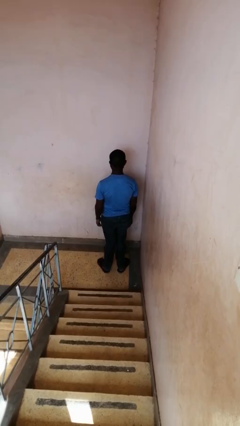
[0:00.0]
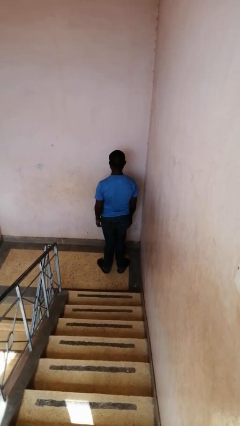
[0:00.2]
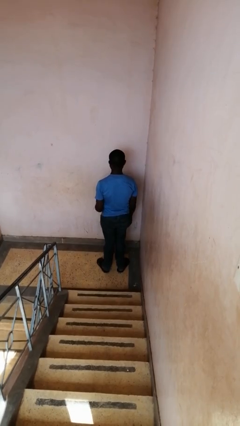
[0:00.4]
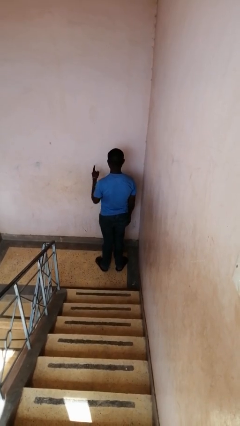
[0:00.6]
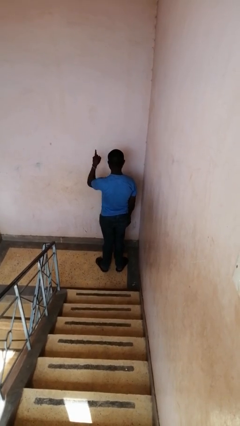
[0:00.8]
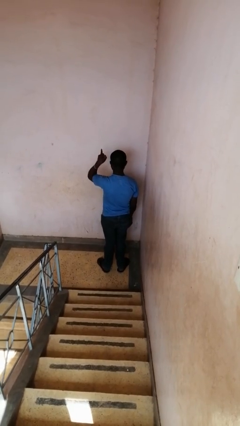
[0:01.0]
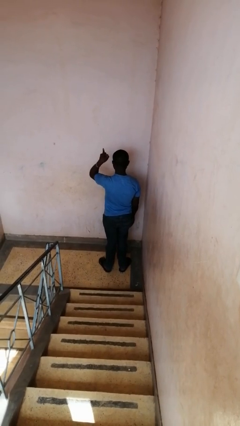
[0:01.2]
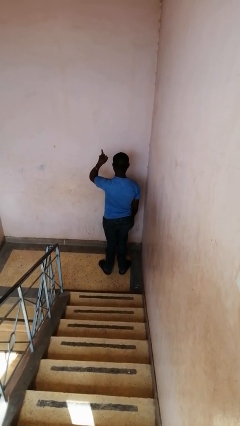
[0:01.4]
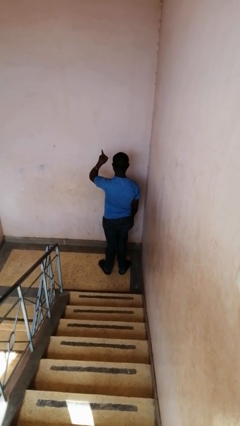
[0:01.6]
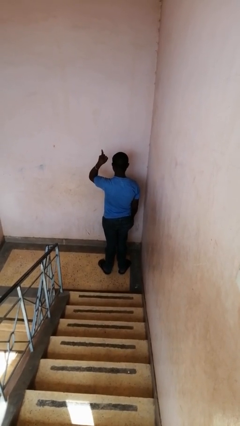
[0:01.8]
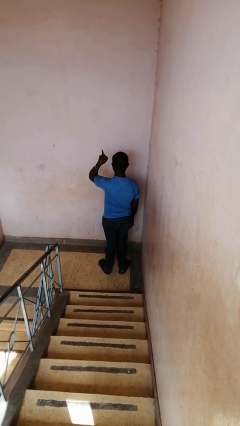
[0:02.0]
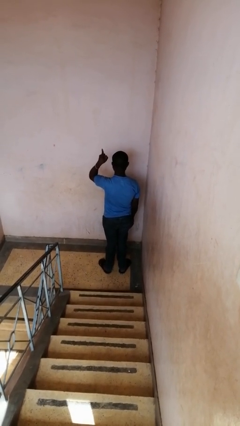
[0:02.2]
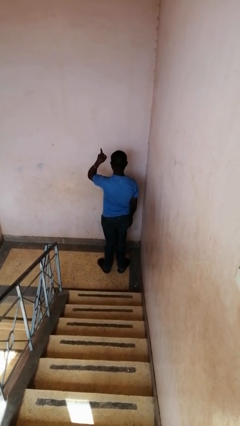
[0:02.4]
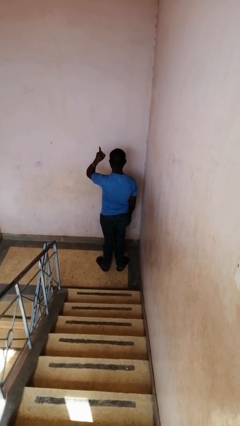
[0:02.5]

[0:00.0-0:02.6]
person gestures number one

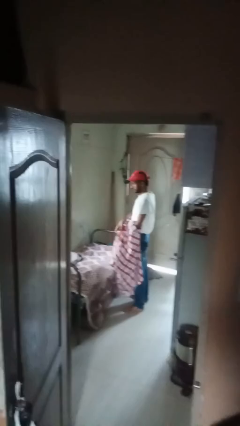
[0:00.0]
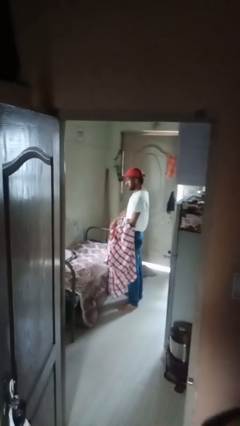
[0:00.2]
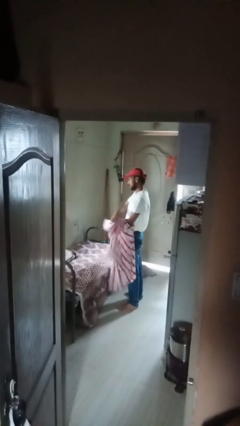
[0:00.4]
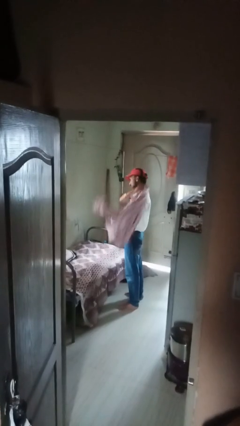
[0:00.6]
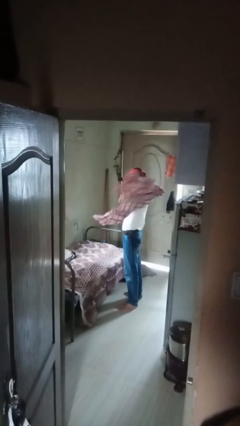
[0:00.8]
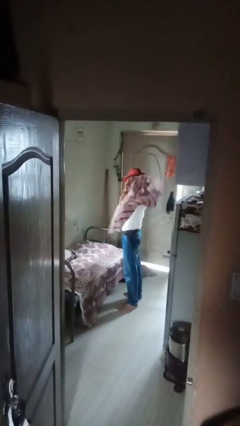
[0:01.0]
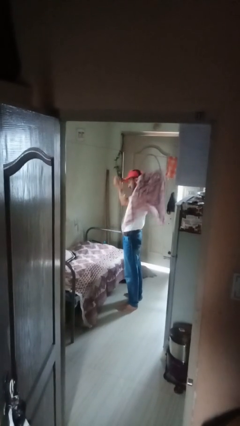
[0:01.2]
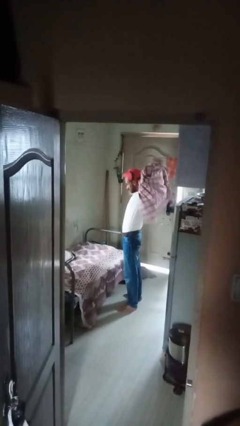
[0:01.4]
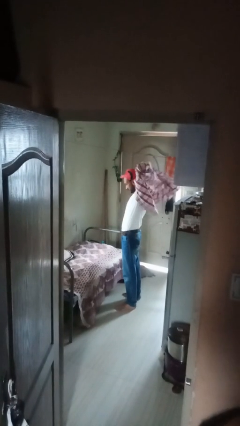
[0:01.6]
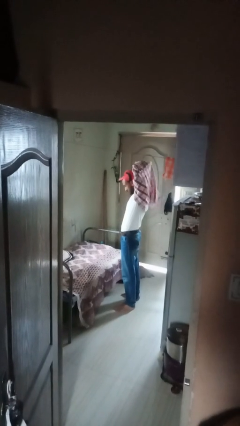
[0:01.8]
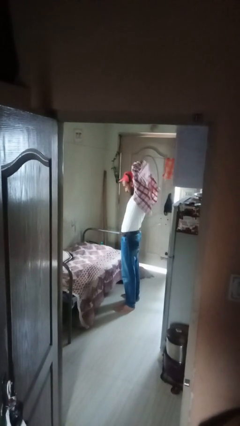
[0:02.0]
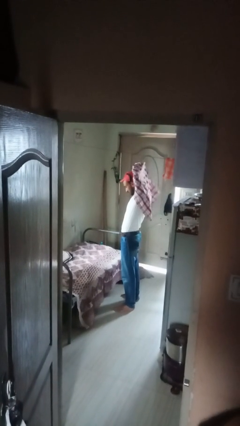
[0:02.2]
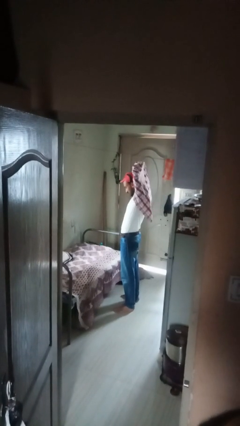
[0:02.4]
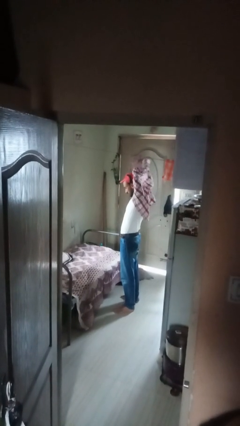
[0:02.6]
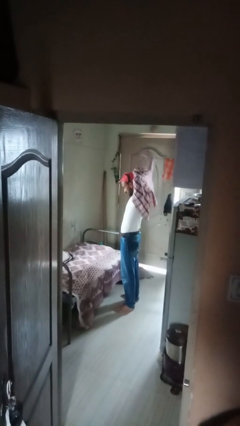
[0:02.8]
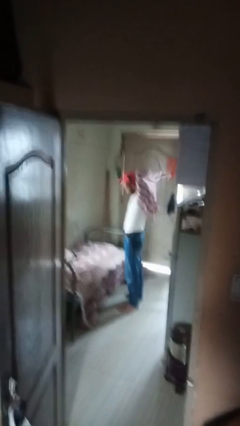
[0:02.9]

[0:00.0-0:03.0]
person puts on shirt

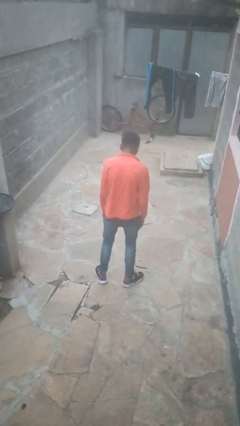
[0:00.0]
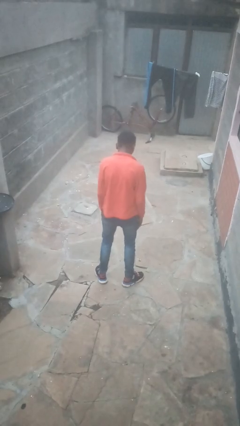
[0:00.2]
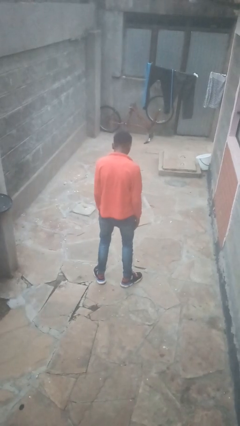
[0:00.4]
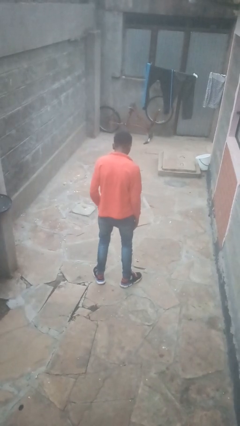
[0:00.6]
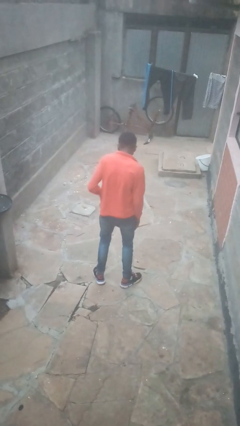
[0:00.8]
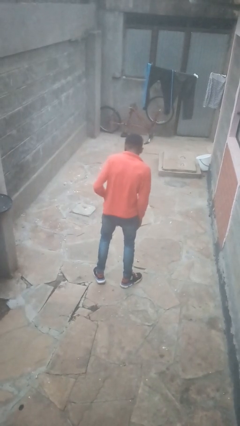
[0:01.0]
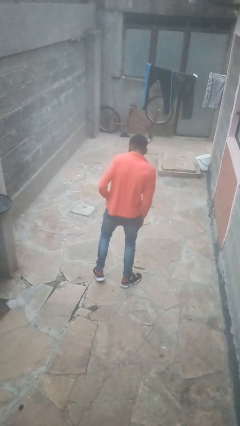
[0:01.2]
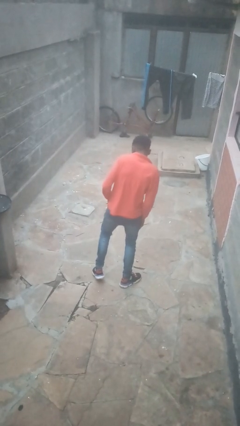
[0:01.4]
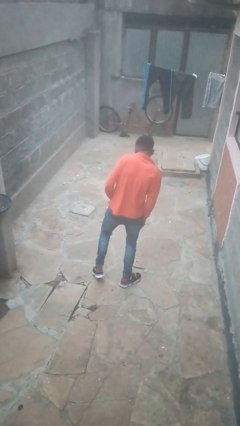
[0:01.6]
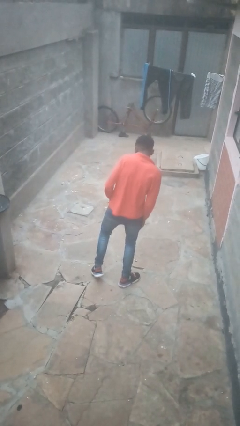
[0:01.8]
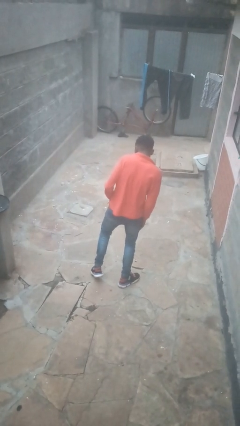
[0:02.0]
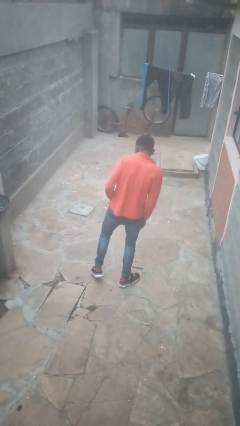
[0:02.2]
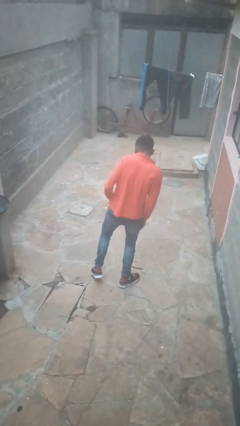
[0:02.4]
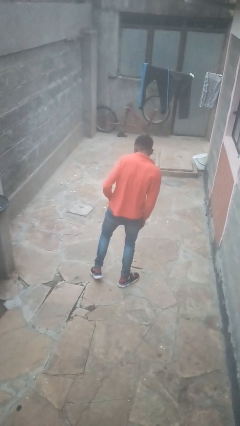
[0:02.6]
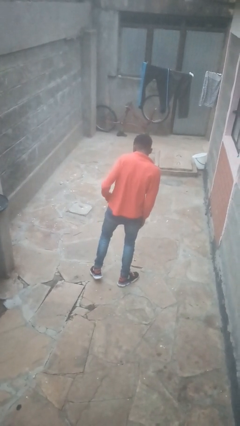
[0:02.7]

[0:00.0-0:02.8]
person puts hands in back pockets

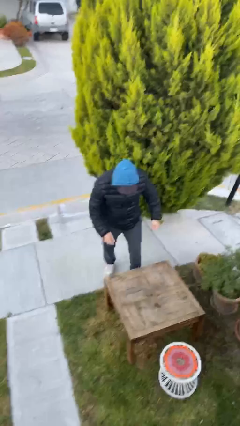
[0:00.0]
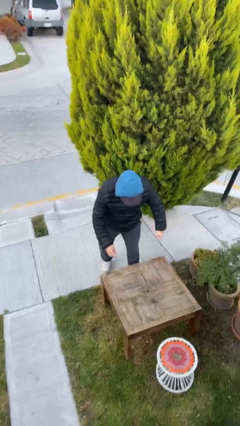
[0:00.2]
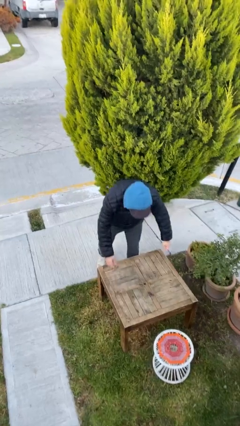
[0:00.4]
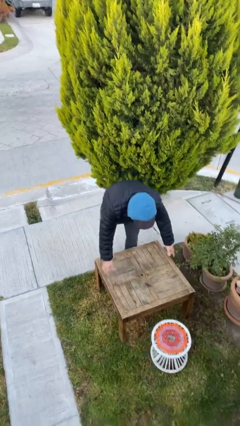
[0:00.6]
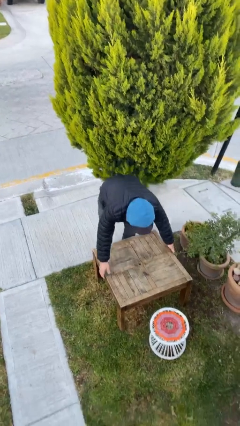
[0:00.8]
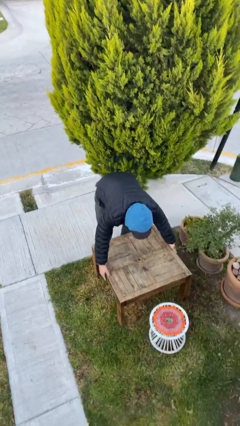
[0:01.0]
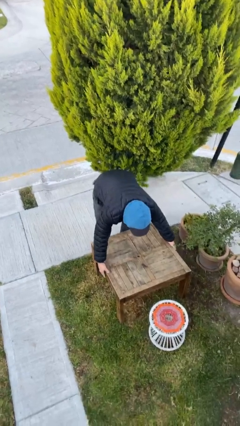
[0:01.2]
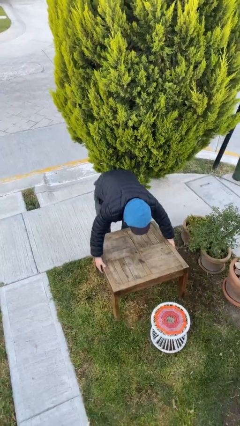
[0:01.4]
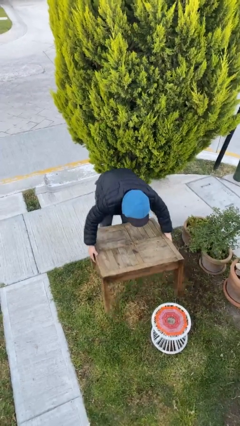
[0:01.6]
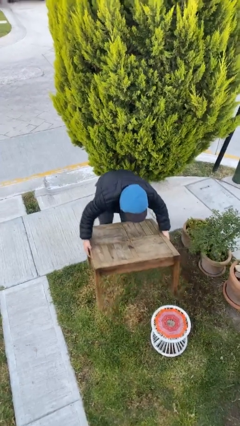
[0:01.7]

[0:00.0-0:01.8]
person picks up object from floor

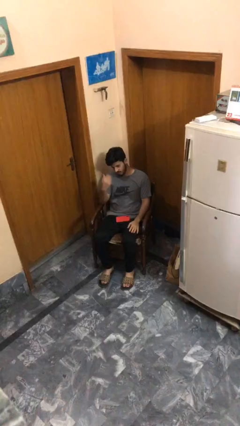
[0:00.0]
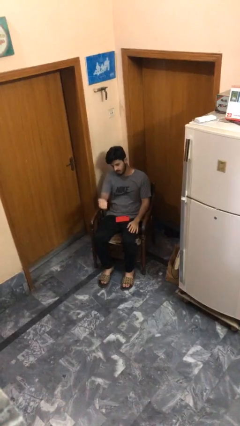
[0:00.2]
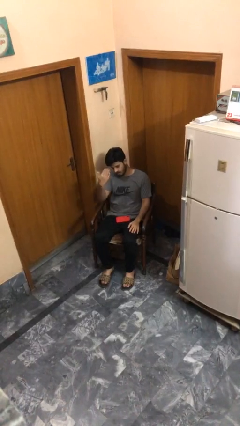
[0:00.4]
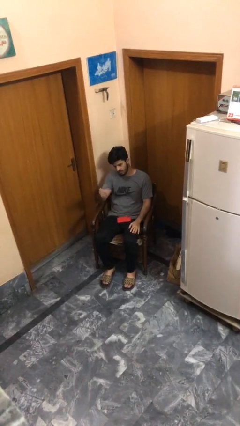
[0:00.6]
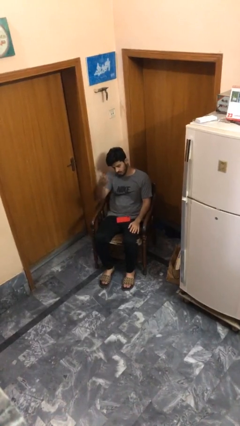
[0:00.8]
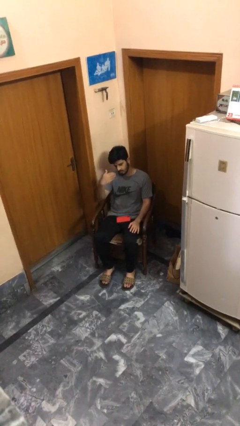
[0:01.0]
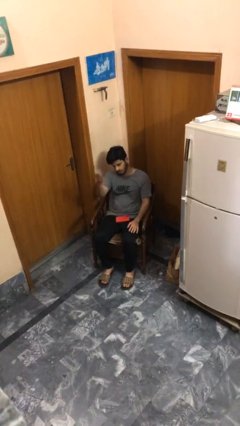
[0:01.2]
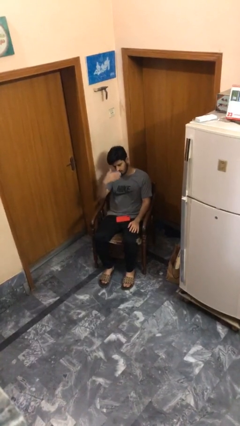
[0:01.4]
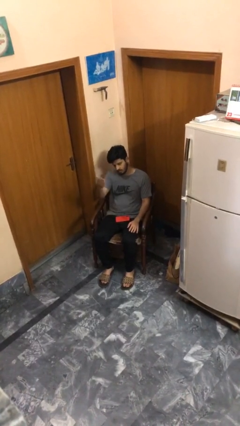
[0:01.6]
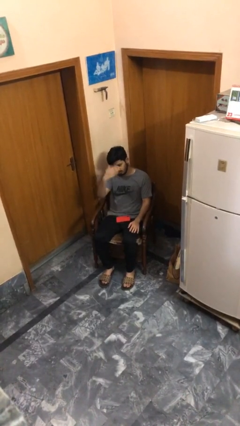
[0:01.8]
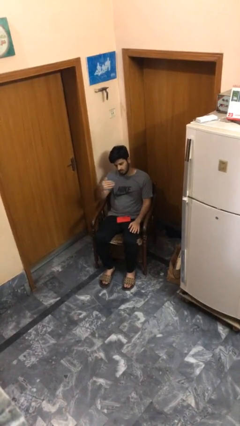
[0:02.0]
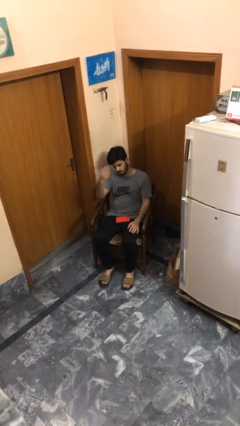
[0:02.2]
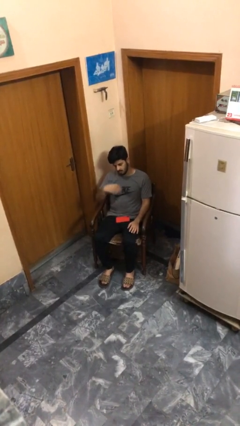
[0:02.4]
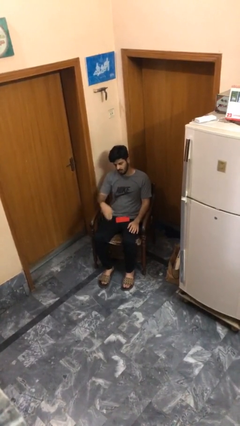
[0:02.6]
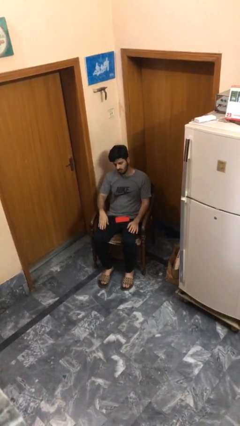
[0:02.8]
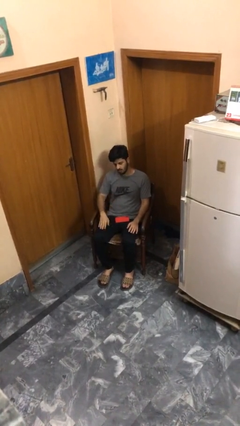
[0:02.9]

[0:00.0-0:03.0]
person gestures come here

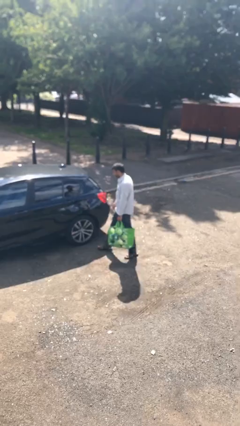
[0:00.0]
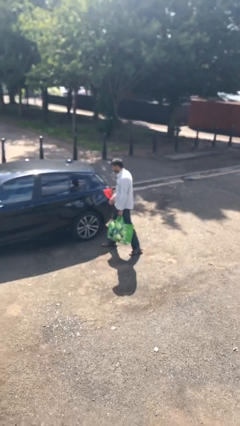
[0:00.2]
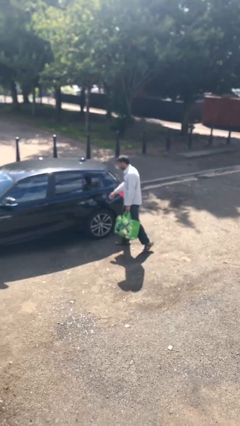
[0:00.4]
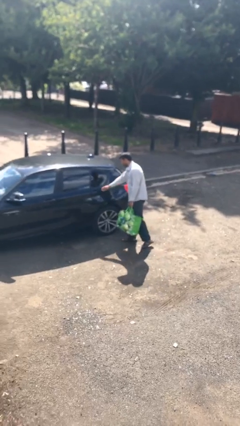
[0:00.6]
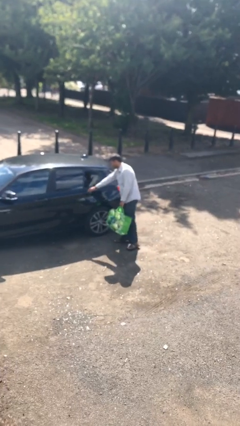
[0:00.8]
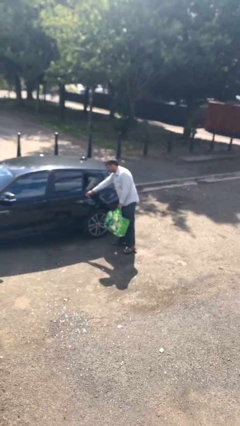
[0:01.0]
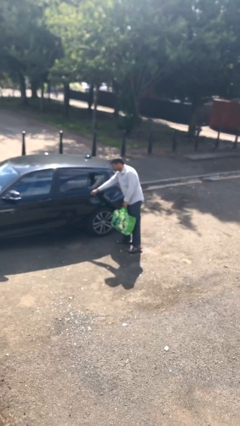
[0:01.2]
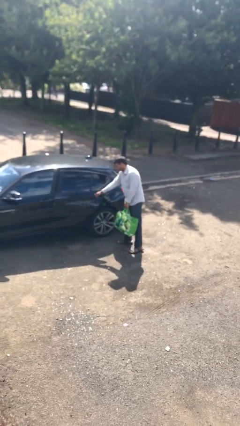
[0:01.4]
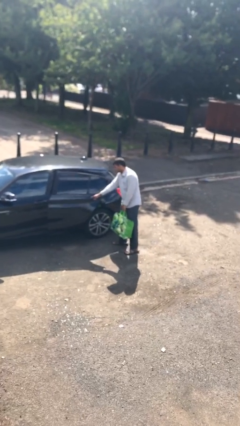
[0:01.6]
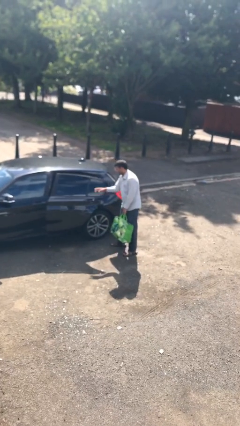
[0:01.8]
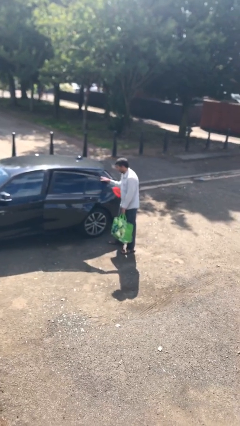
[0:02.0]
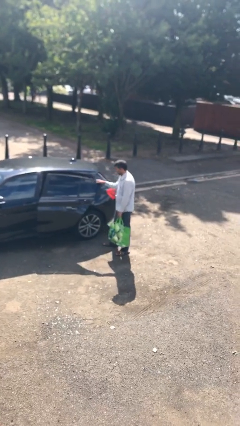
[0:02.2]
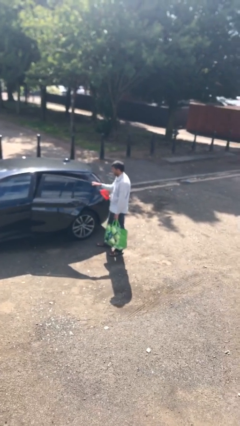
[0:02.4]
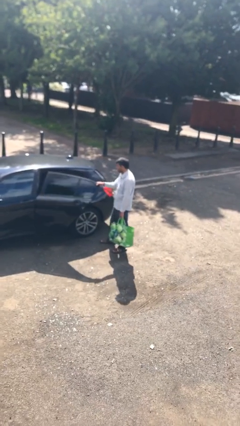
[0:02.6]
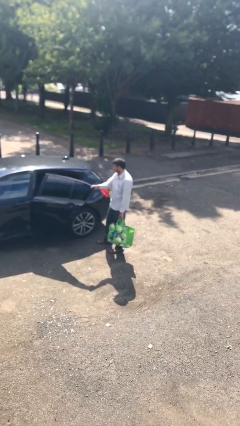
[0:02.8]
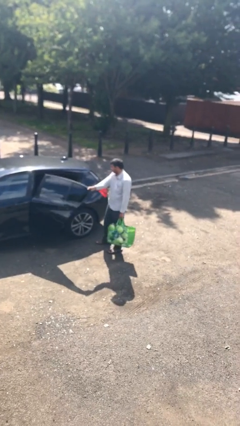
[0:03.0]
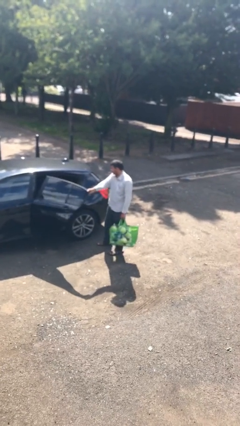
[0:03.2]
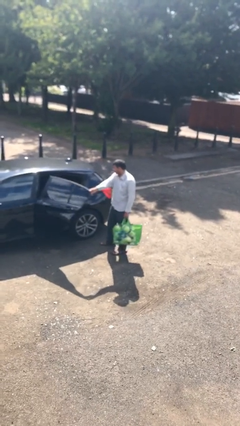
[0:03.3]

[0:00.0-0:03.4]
person opens car door

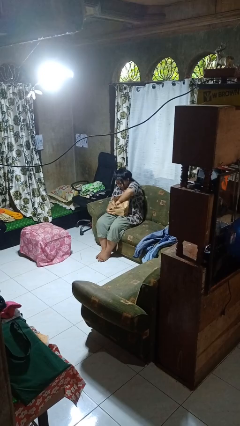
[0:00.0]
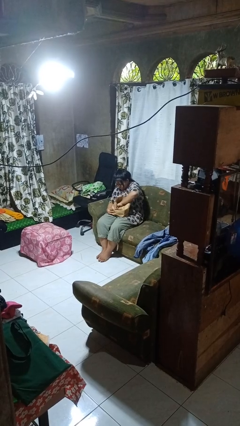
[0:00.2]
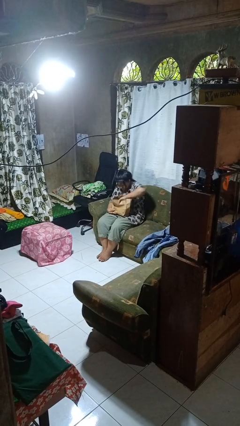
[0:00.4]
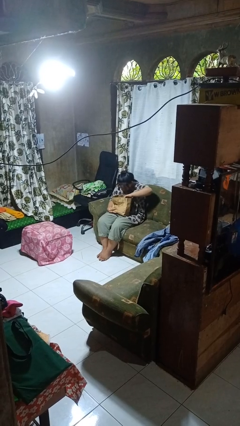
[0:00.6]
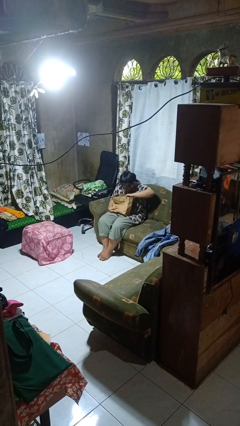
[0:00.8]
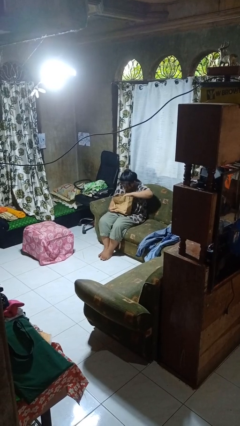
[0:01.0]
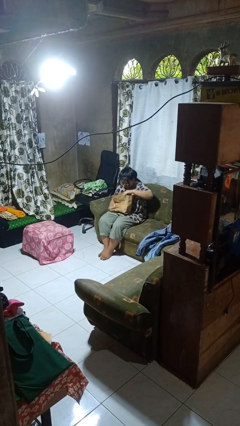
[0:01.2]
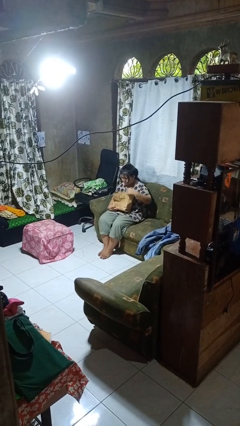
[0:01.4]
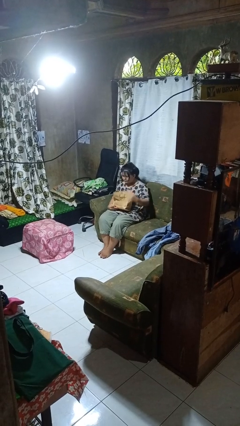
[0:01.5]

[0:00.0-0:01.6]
person searches in bag
